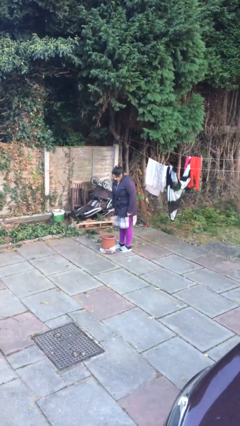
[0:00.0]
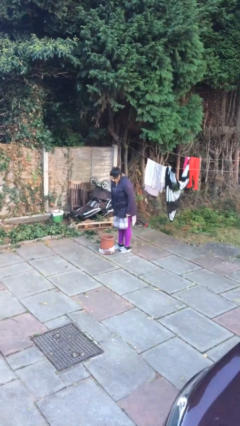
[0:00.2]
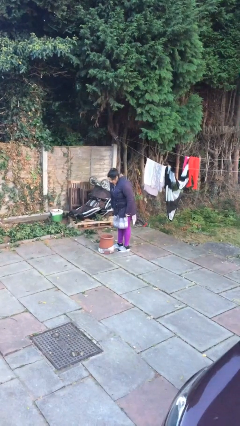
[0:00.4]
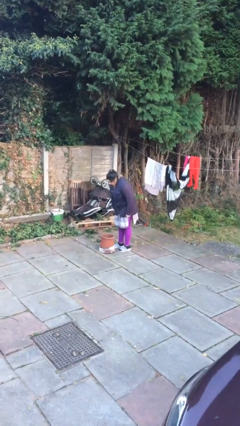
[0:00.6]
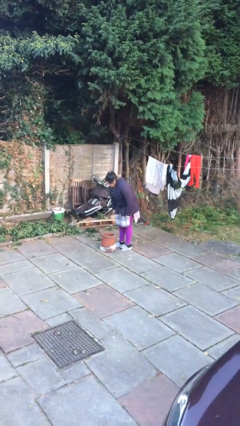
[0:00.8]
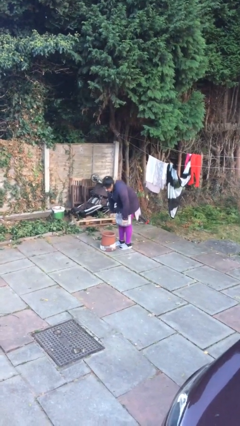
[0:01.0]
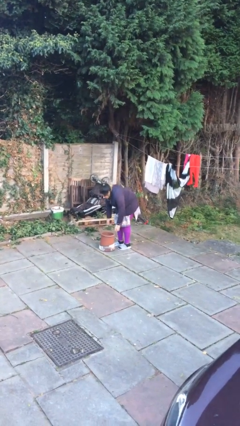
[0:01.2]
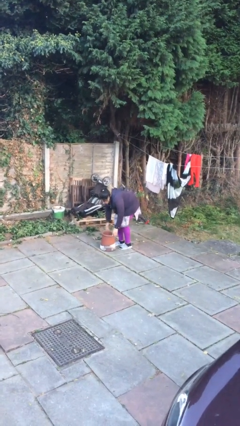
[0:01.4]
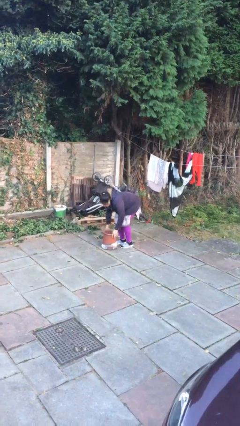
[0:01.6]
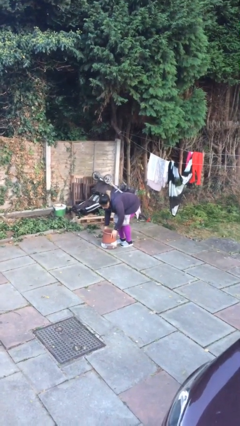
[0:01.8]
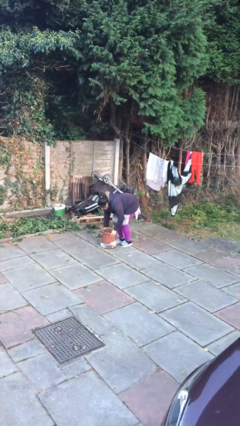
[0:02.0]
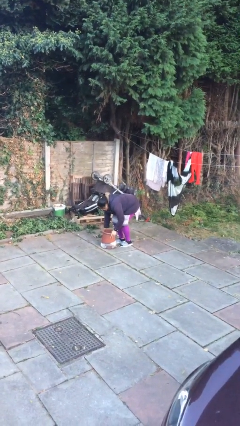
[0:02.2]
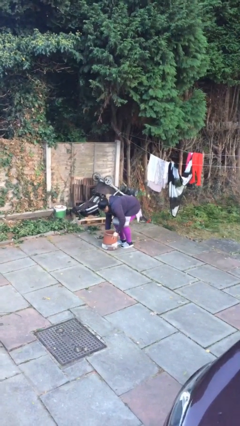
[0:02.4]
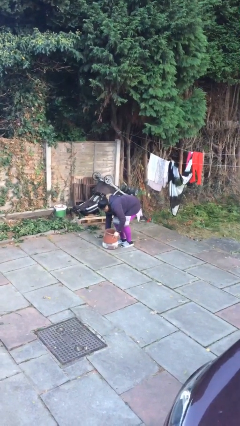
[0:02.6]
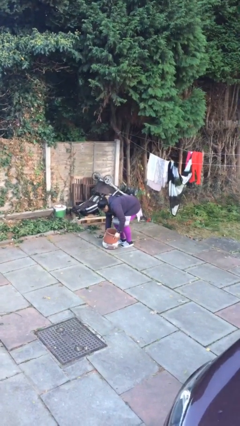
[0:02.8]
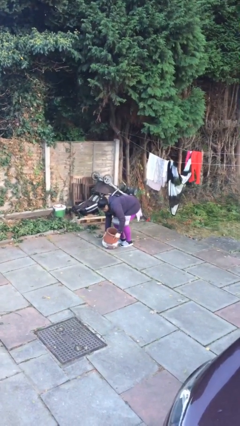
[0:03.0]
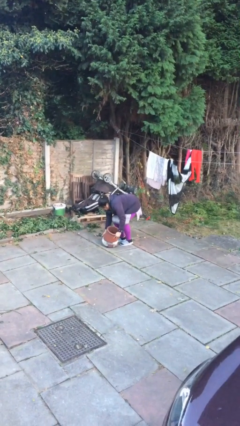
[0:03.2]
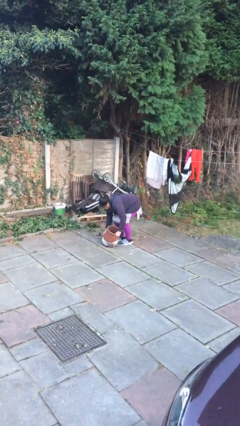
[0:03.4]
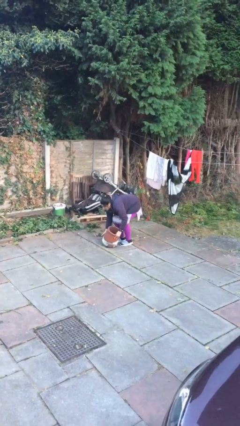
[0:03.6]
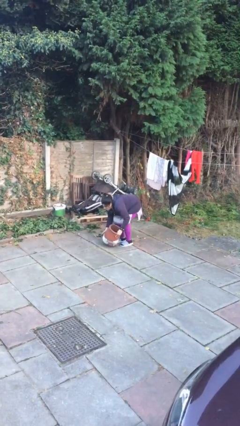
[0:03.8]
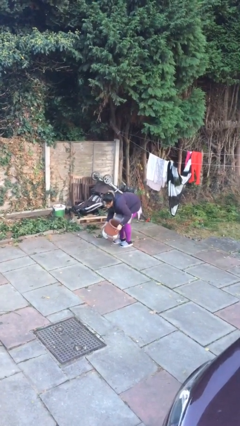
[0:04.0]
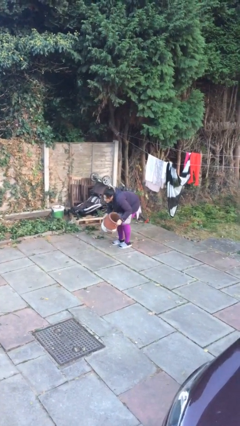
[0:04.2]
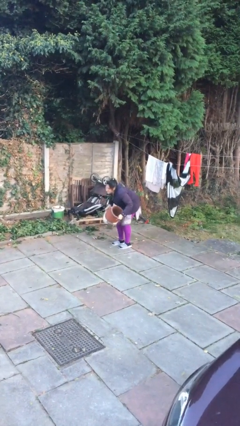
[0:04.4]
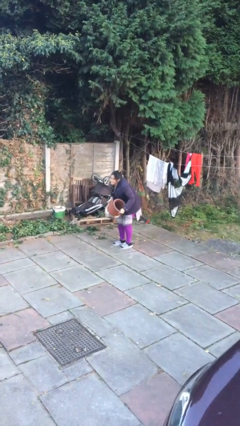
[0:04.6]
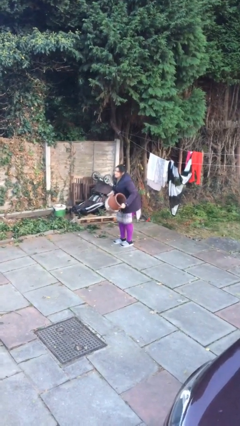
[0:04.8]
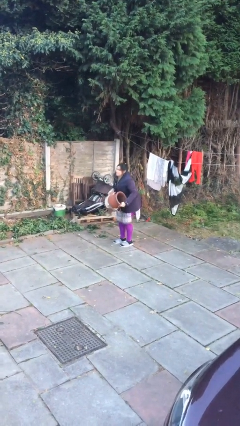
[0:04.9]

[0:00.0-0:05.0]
person picks up object from floor

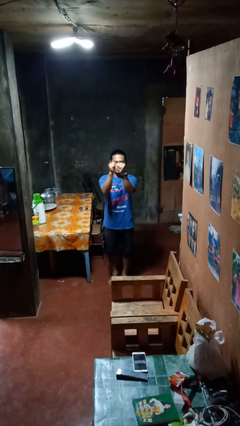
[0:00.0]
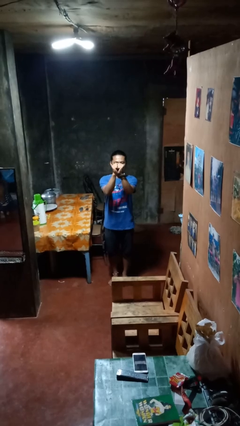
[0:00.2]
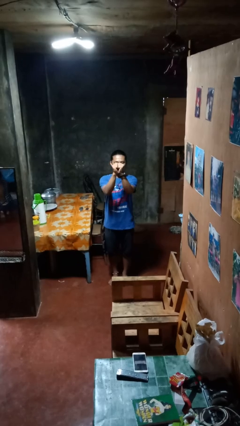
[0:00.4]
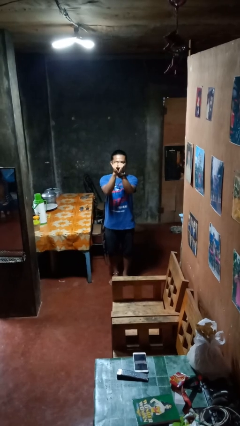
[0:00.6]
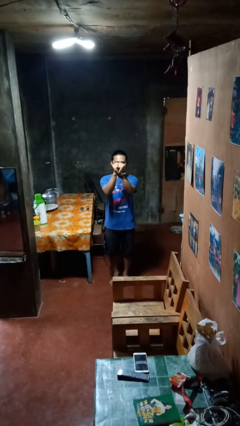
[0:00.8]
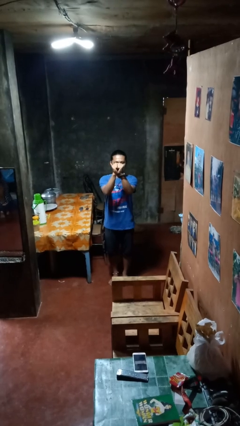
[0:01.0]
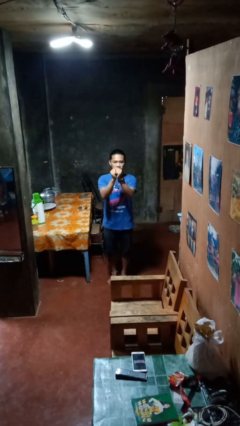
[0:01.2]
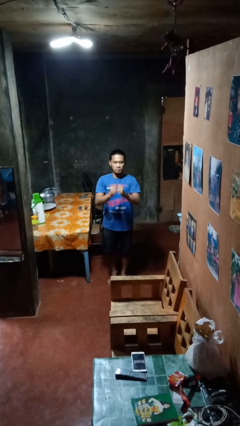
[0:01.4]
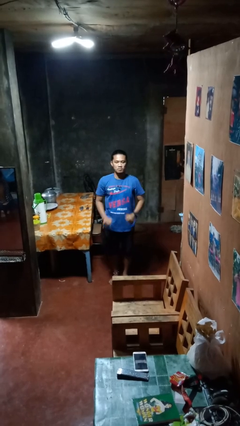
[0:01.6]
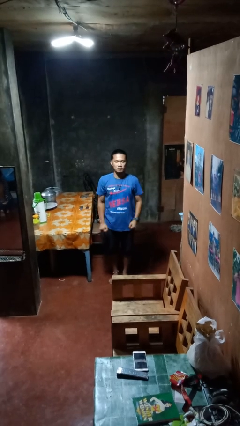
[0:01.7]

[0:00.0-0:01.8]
person gestures zoom out

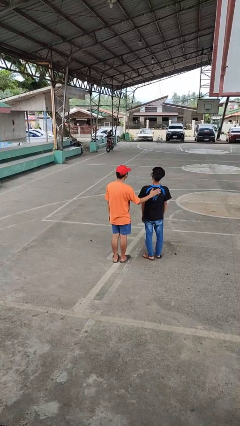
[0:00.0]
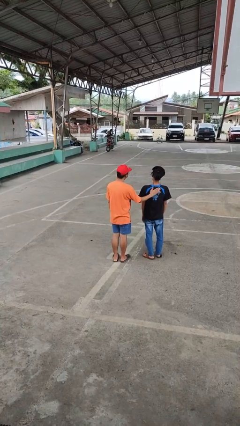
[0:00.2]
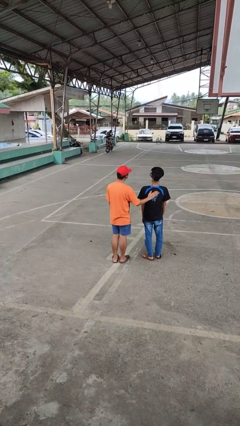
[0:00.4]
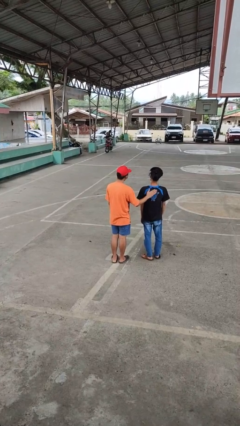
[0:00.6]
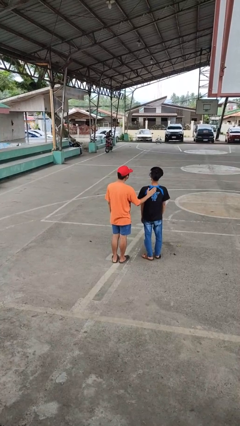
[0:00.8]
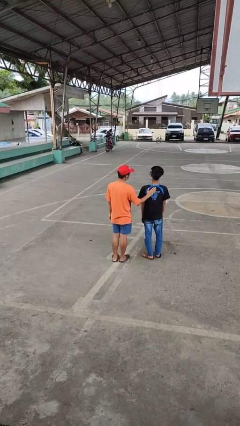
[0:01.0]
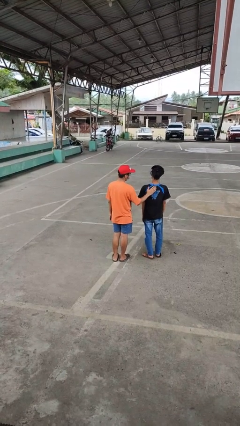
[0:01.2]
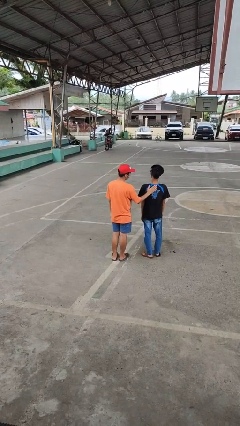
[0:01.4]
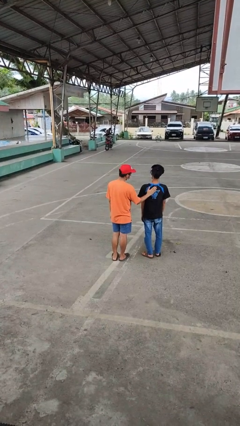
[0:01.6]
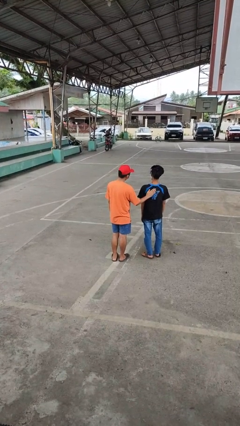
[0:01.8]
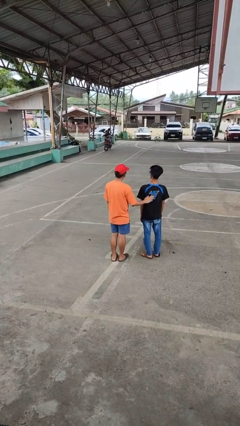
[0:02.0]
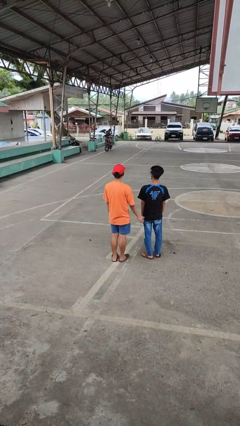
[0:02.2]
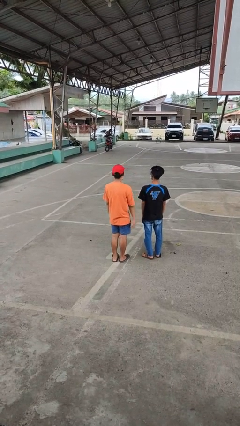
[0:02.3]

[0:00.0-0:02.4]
person touches back of person

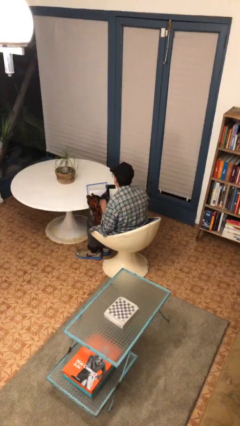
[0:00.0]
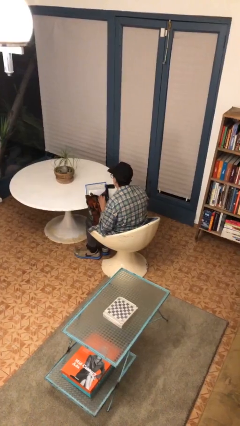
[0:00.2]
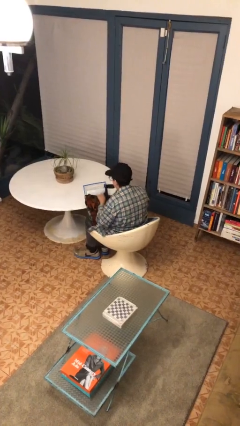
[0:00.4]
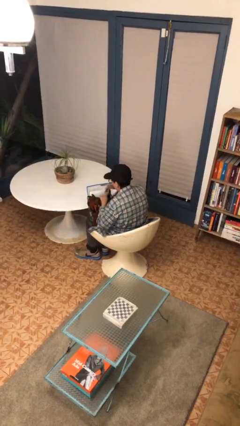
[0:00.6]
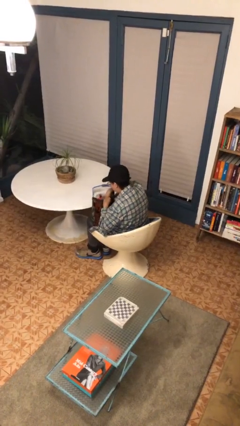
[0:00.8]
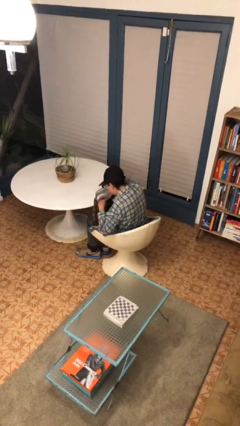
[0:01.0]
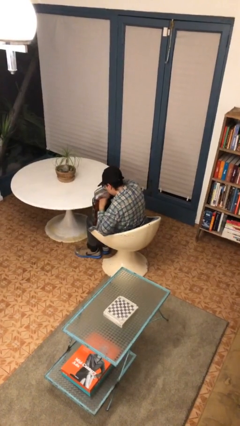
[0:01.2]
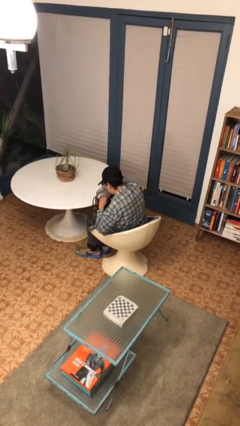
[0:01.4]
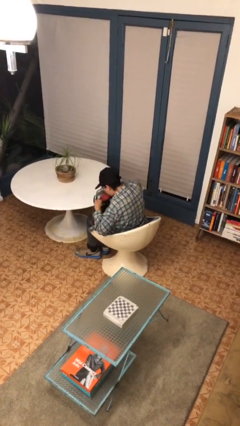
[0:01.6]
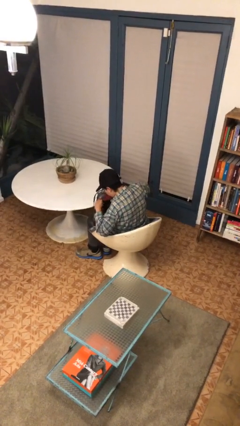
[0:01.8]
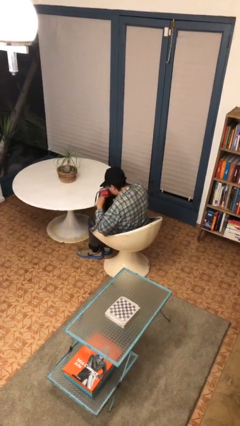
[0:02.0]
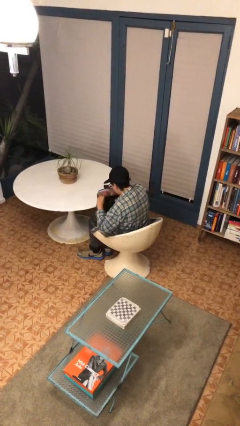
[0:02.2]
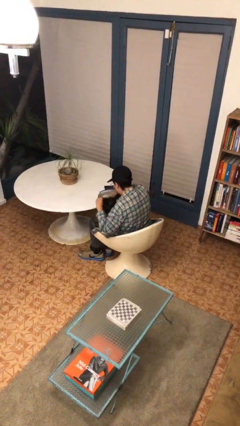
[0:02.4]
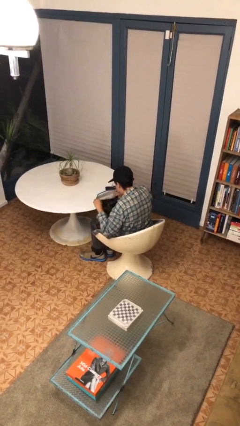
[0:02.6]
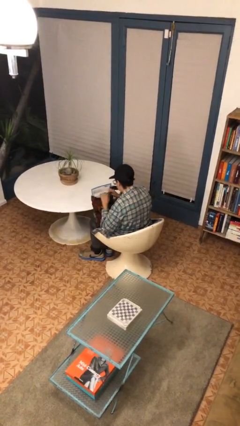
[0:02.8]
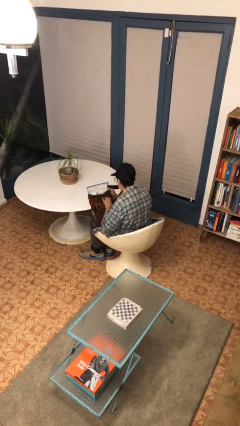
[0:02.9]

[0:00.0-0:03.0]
person searches in bag

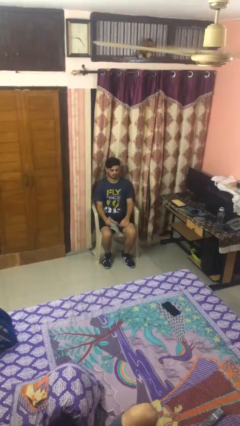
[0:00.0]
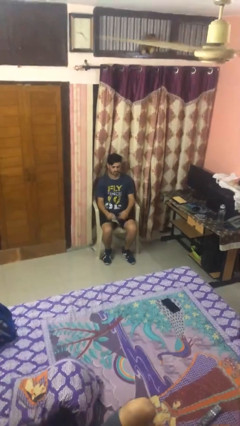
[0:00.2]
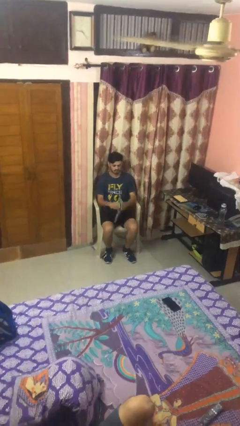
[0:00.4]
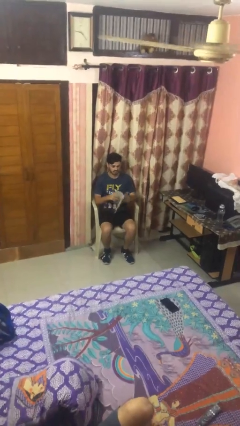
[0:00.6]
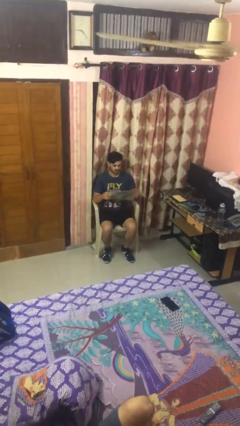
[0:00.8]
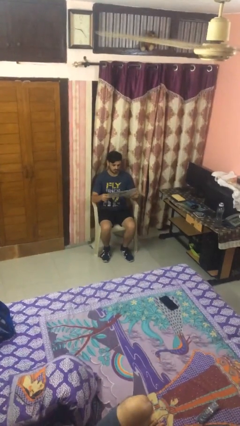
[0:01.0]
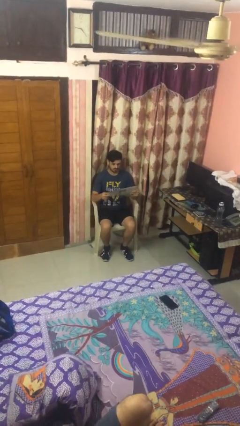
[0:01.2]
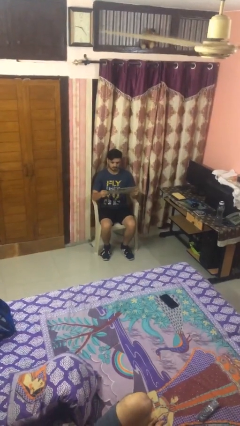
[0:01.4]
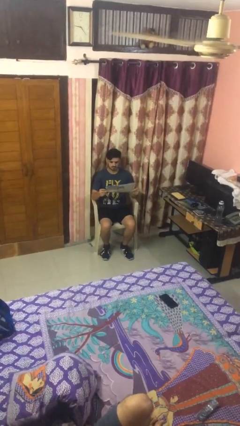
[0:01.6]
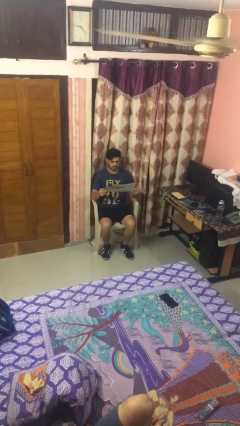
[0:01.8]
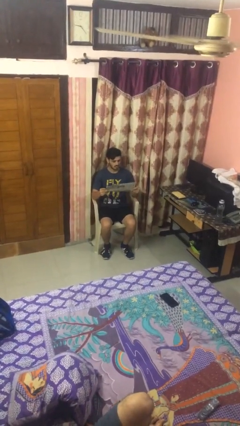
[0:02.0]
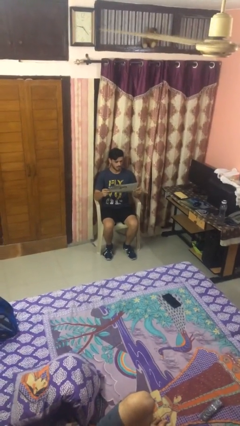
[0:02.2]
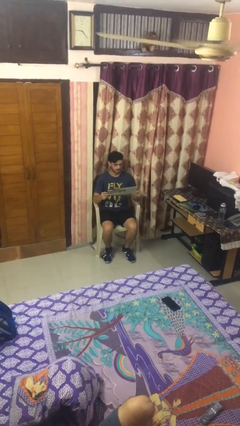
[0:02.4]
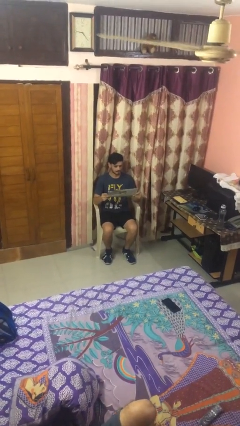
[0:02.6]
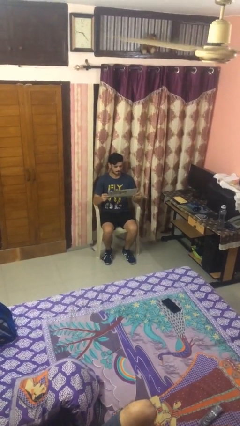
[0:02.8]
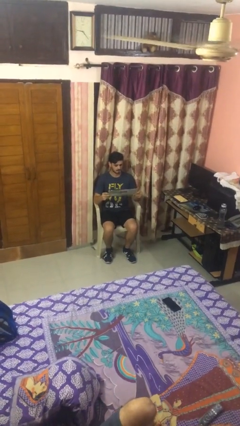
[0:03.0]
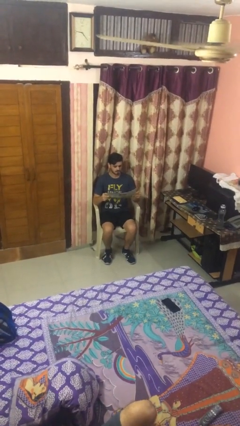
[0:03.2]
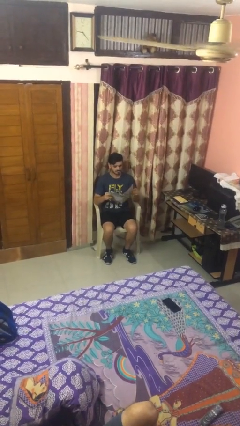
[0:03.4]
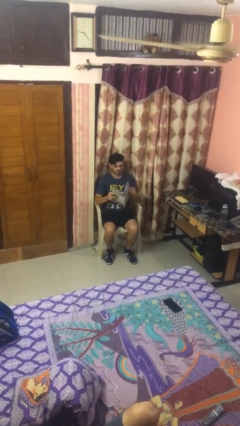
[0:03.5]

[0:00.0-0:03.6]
person reads newspaper

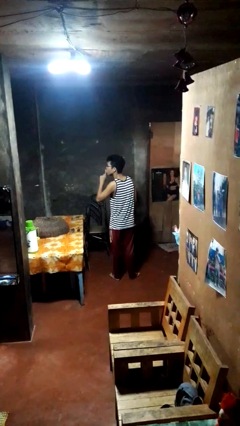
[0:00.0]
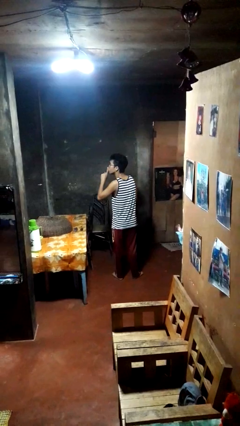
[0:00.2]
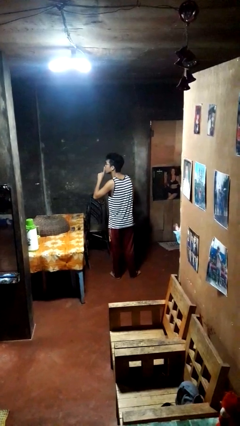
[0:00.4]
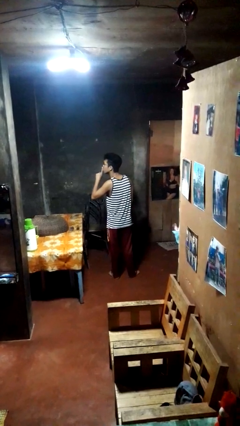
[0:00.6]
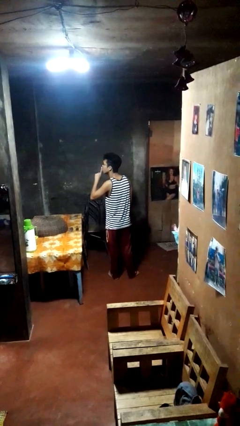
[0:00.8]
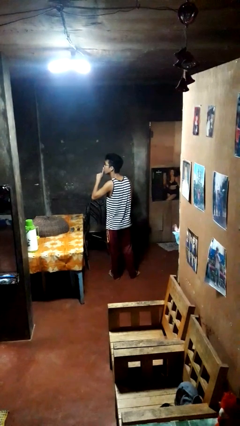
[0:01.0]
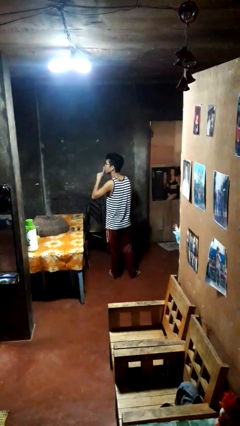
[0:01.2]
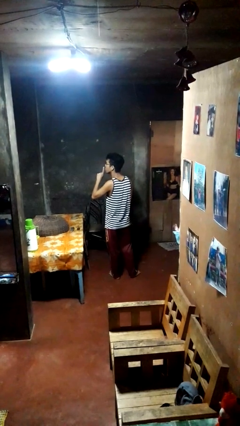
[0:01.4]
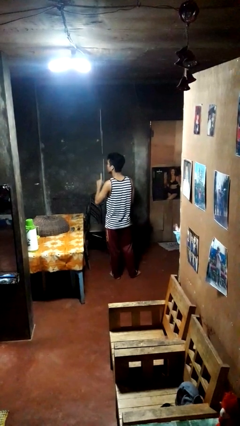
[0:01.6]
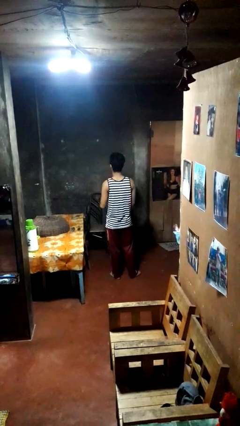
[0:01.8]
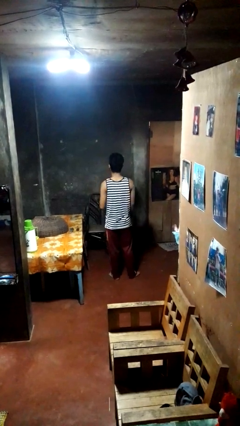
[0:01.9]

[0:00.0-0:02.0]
person gestures be quiet
